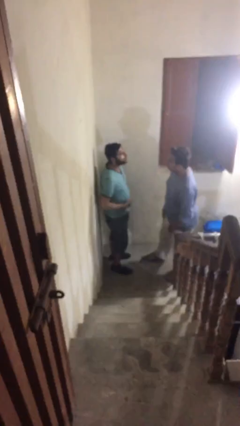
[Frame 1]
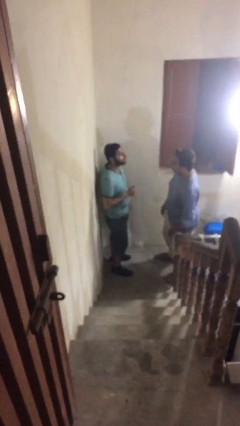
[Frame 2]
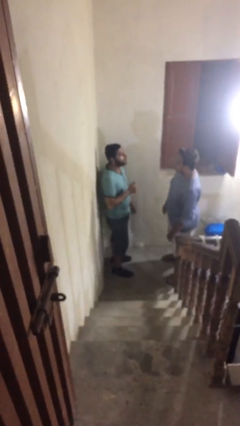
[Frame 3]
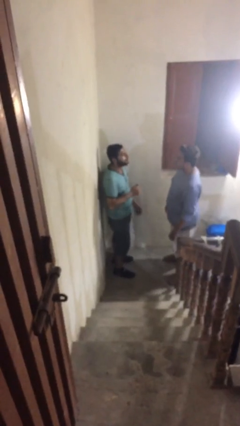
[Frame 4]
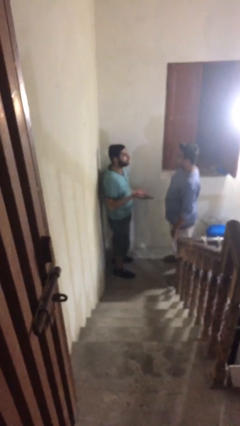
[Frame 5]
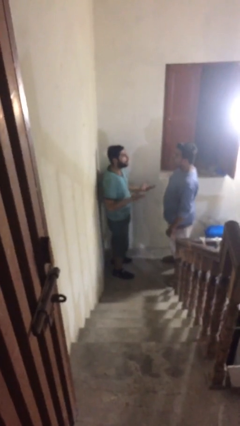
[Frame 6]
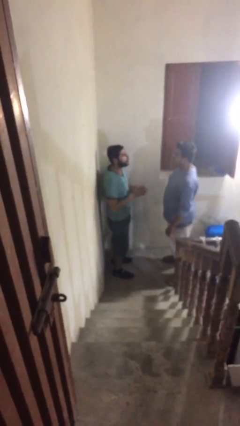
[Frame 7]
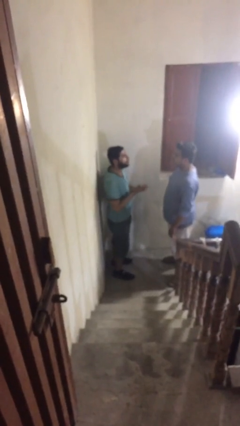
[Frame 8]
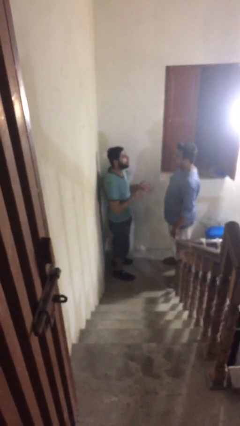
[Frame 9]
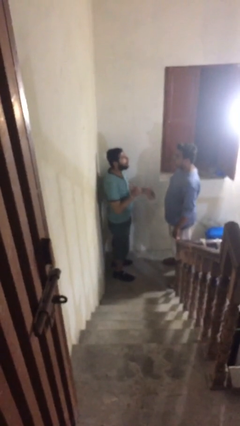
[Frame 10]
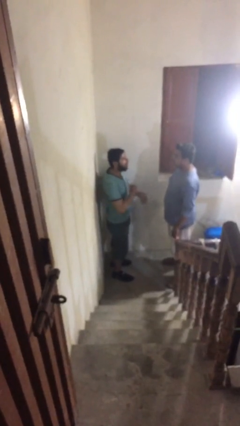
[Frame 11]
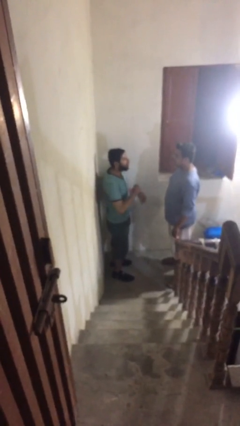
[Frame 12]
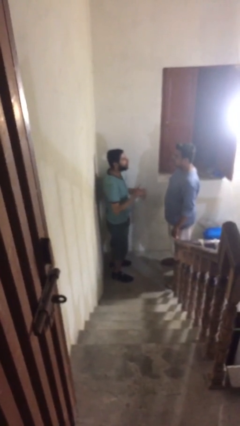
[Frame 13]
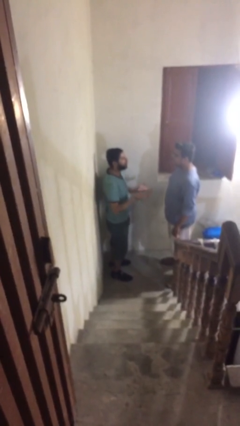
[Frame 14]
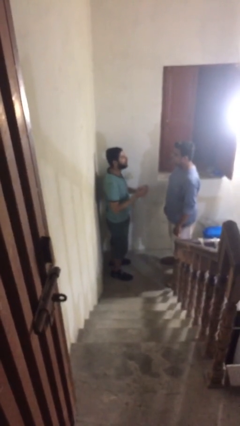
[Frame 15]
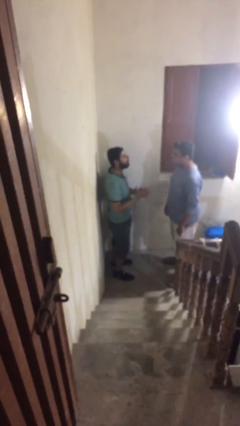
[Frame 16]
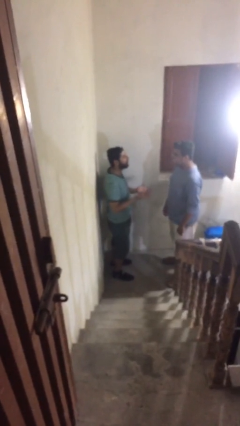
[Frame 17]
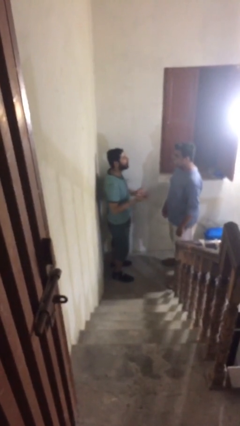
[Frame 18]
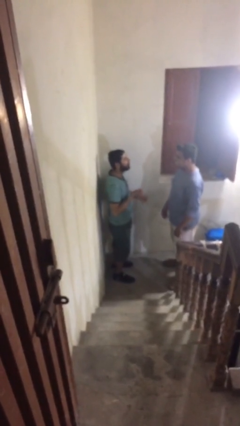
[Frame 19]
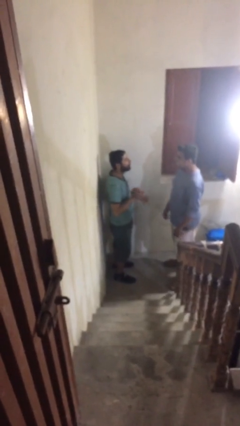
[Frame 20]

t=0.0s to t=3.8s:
person talks to person

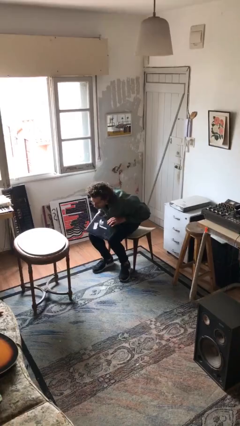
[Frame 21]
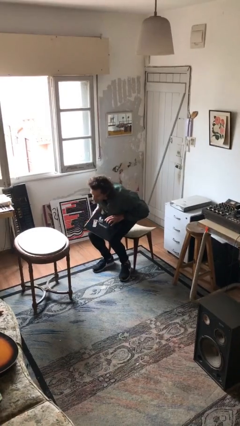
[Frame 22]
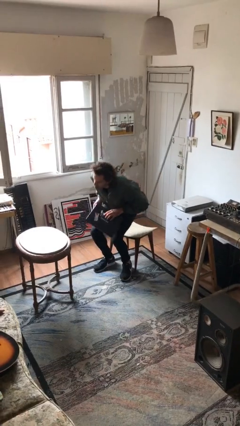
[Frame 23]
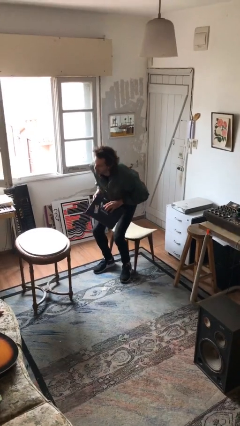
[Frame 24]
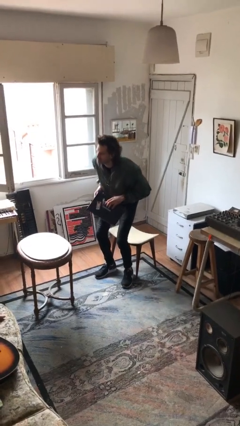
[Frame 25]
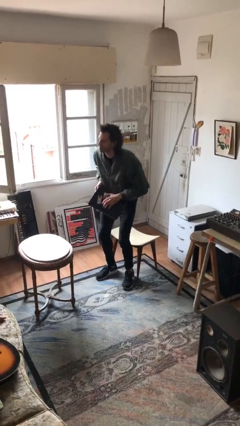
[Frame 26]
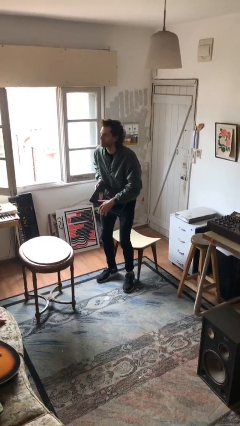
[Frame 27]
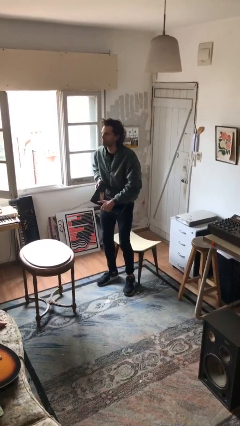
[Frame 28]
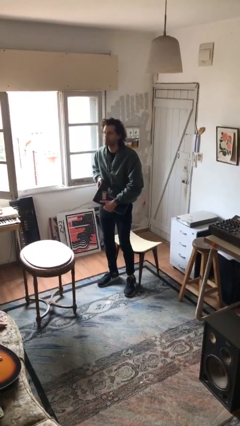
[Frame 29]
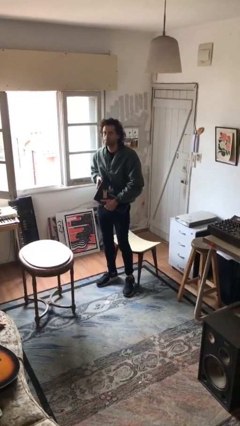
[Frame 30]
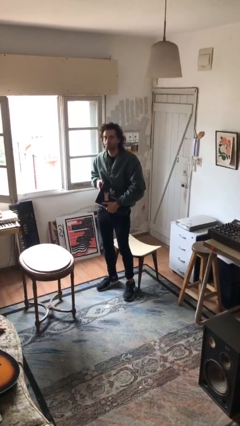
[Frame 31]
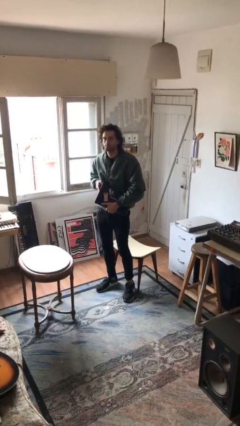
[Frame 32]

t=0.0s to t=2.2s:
person stands up

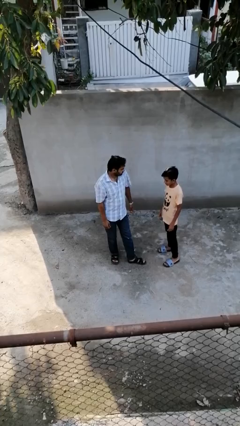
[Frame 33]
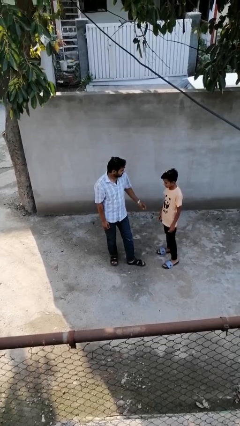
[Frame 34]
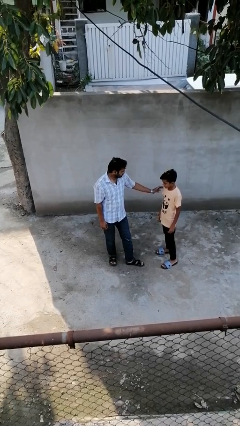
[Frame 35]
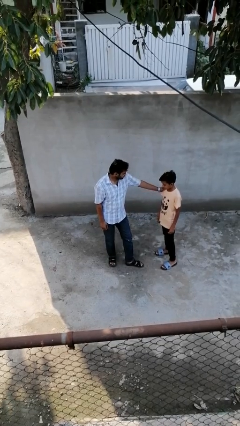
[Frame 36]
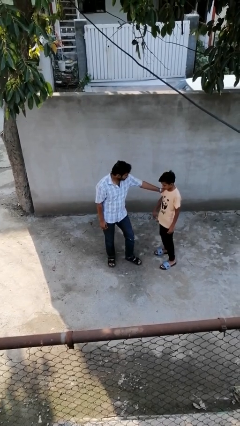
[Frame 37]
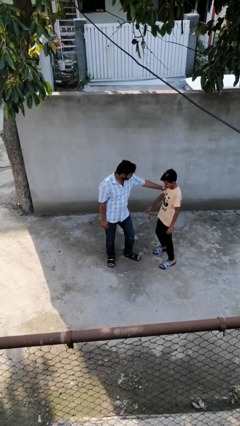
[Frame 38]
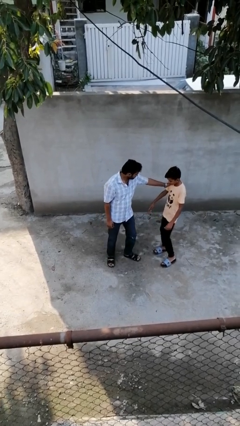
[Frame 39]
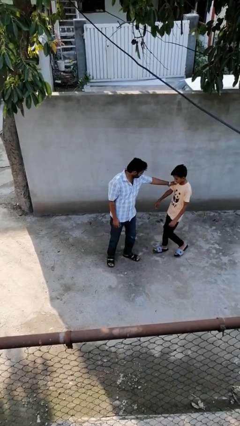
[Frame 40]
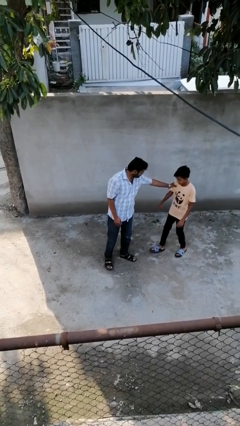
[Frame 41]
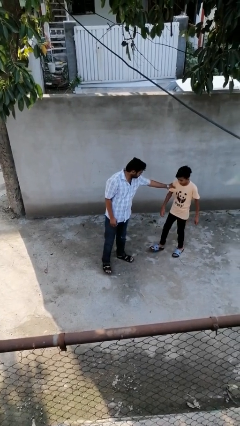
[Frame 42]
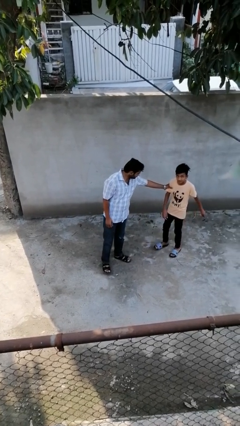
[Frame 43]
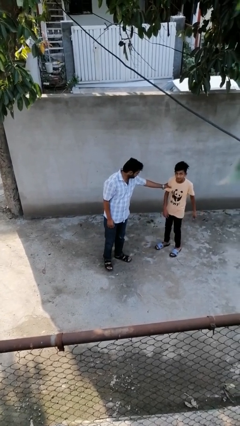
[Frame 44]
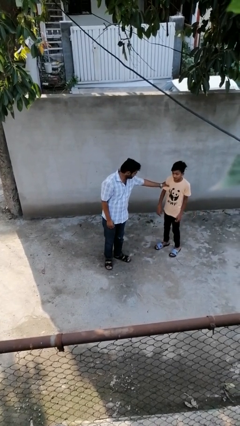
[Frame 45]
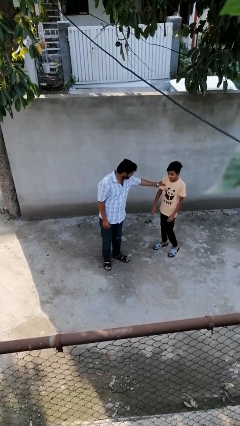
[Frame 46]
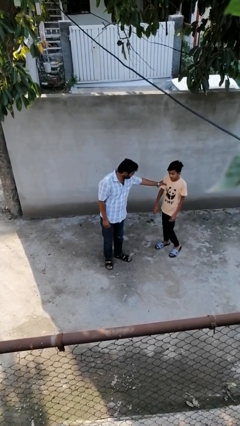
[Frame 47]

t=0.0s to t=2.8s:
person grabs person by bicep

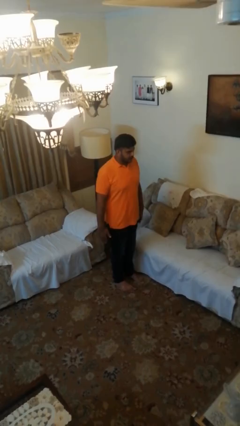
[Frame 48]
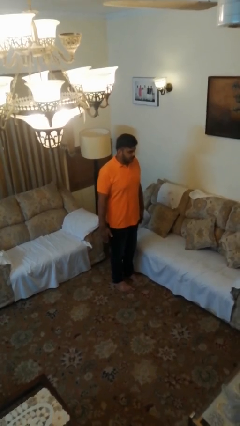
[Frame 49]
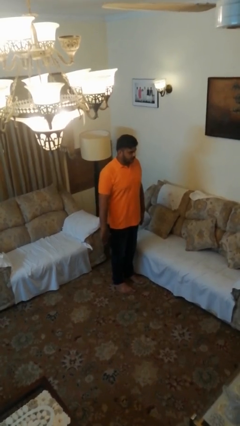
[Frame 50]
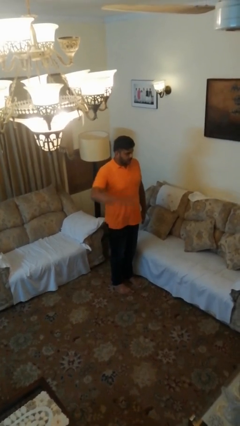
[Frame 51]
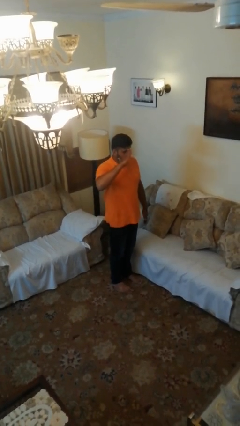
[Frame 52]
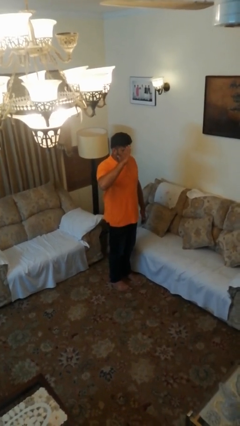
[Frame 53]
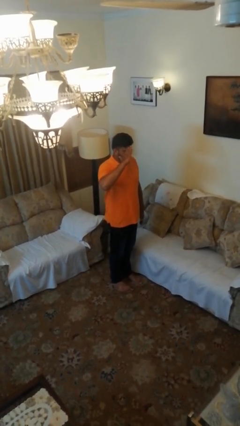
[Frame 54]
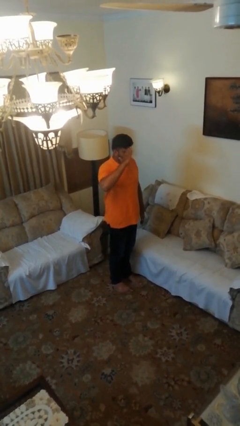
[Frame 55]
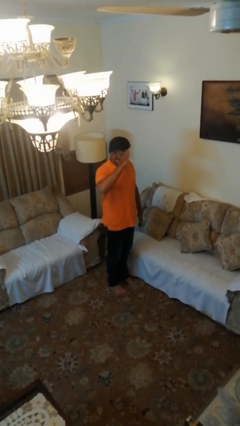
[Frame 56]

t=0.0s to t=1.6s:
person salutes

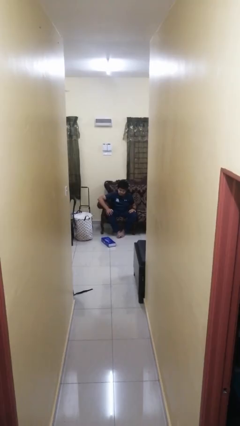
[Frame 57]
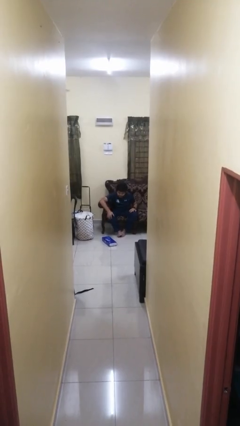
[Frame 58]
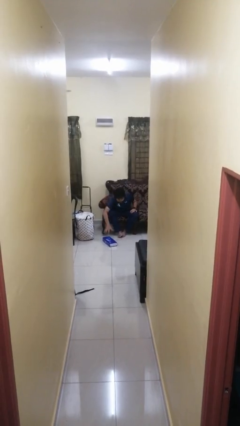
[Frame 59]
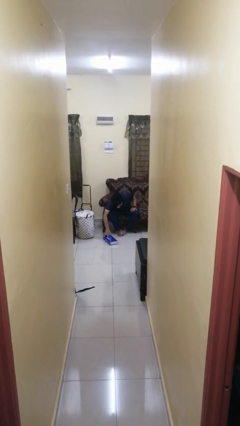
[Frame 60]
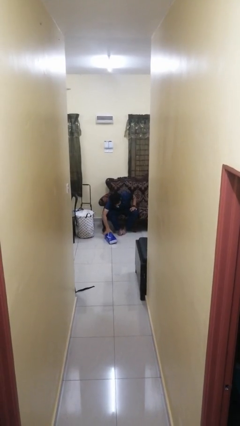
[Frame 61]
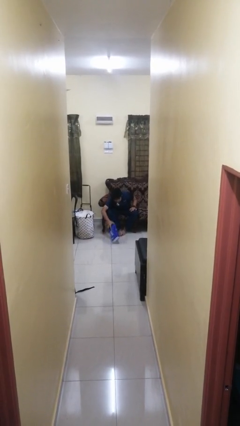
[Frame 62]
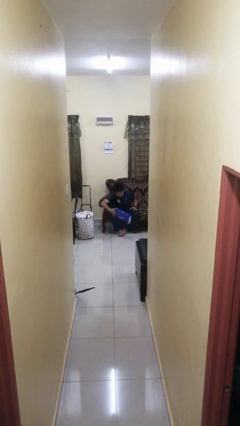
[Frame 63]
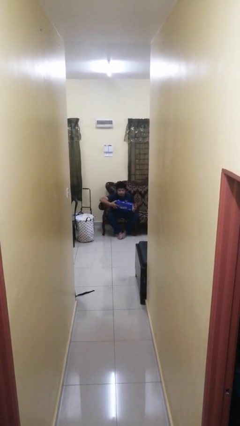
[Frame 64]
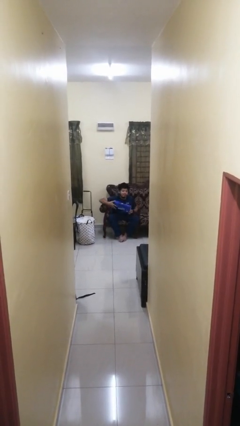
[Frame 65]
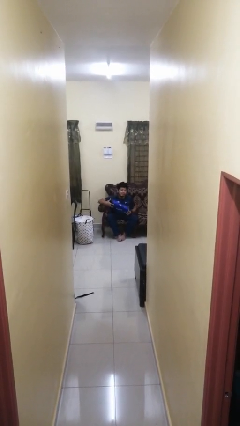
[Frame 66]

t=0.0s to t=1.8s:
person picks up object from floor

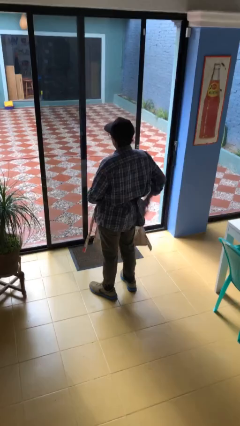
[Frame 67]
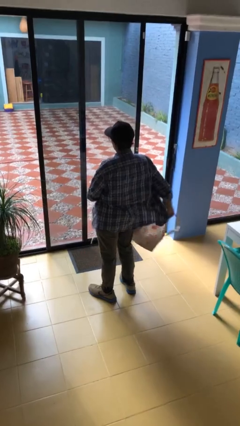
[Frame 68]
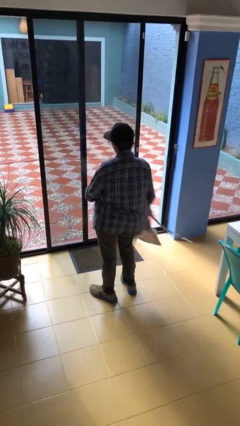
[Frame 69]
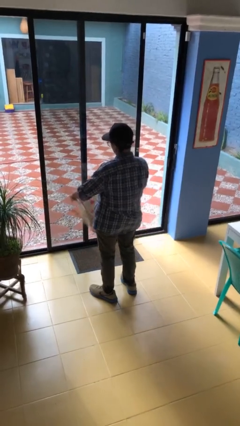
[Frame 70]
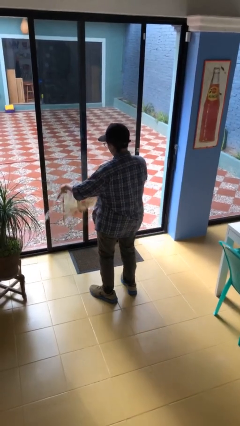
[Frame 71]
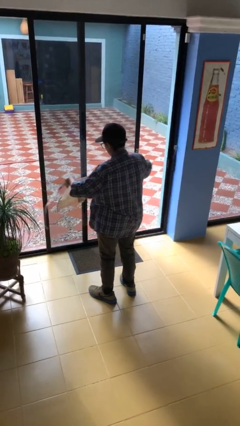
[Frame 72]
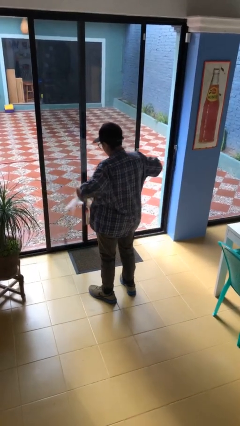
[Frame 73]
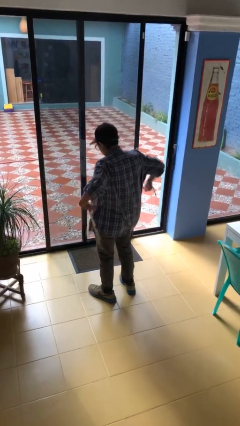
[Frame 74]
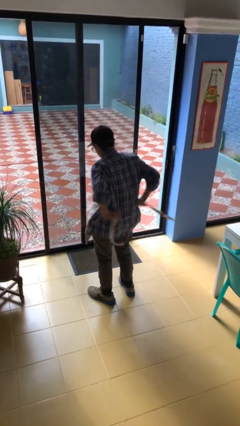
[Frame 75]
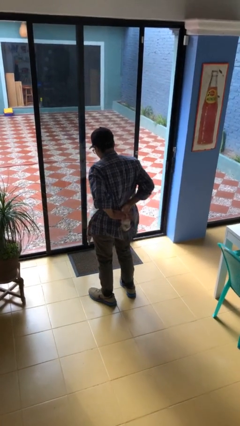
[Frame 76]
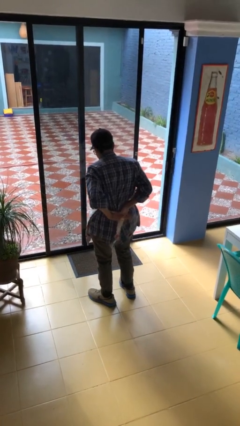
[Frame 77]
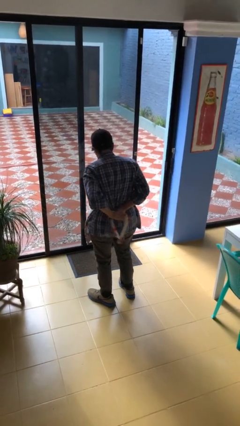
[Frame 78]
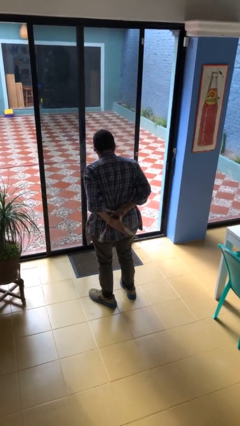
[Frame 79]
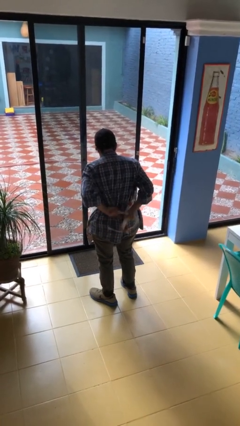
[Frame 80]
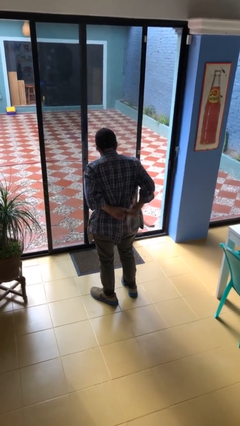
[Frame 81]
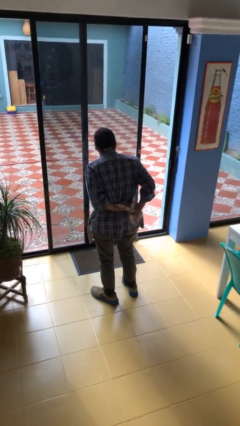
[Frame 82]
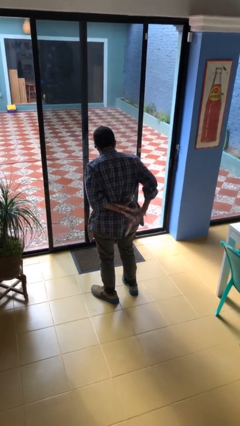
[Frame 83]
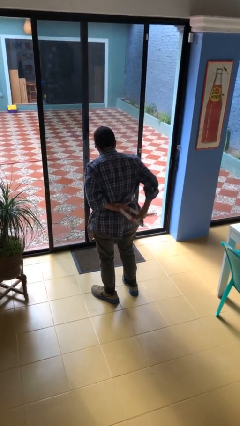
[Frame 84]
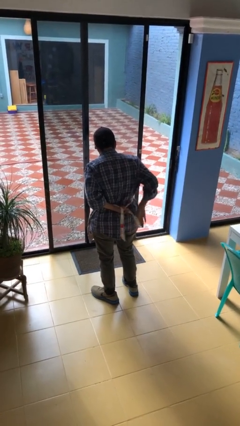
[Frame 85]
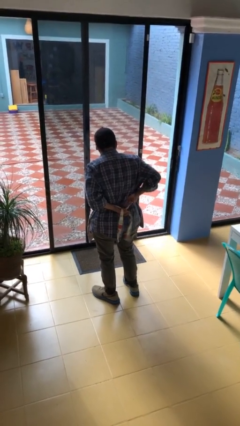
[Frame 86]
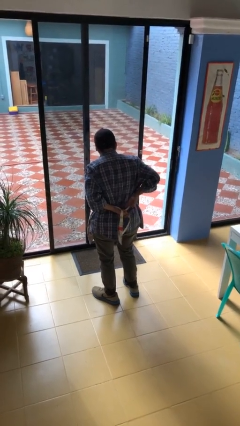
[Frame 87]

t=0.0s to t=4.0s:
person puts on apron

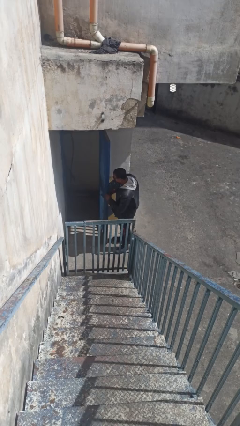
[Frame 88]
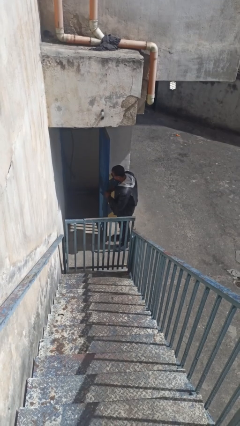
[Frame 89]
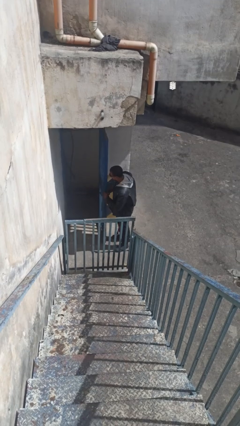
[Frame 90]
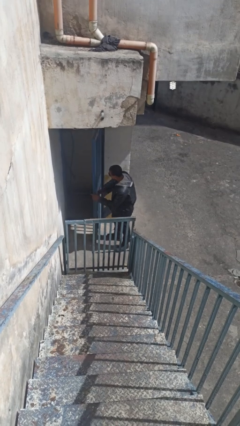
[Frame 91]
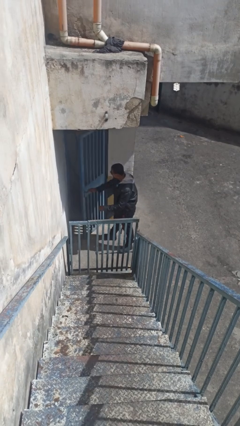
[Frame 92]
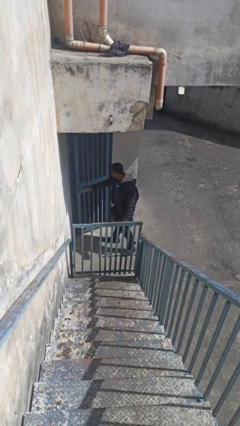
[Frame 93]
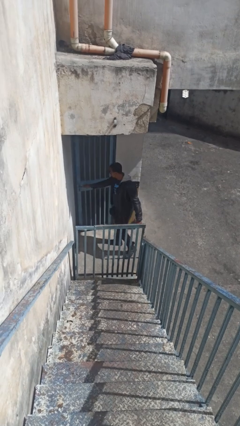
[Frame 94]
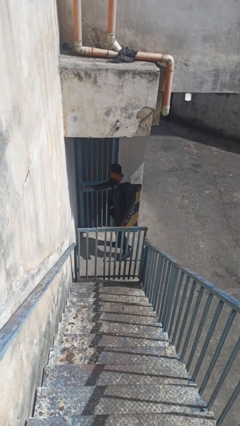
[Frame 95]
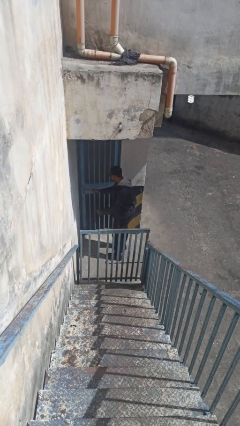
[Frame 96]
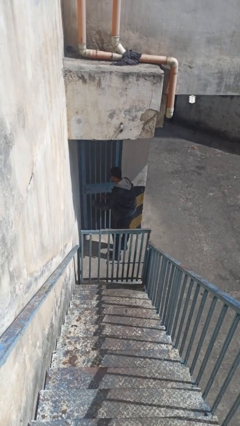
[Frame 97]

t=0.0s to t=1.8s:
person closes facility door
